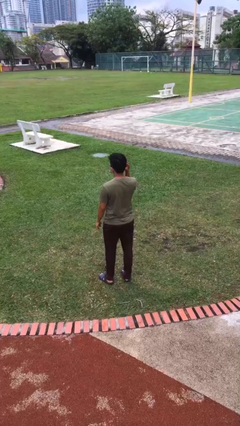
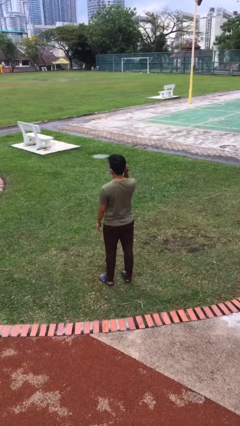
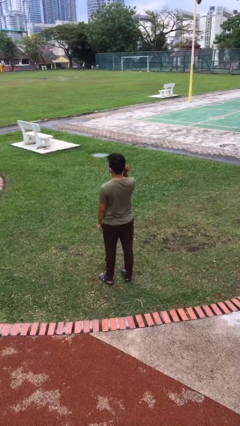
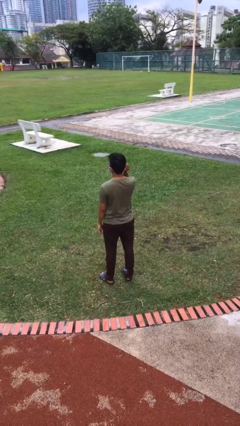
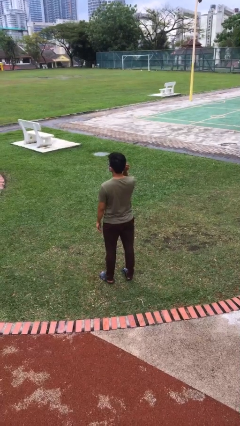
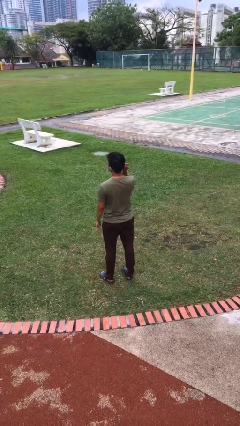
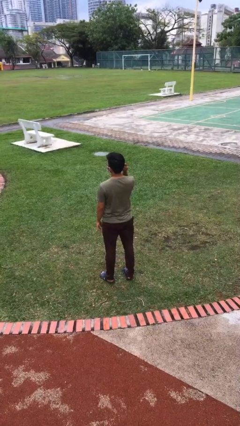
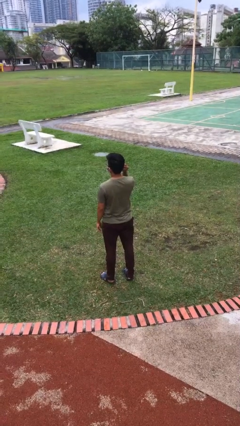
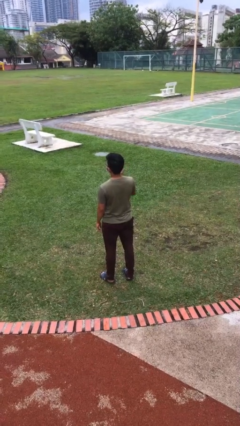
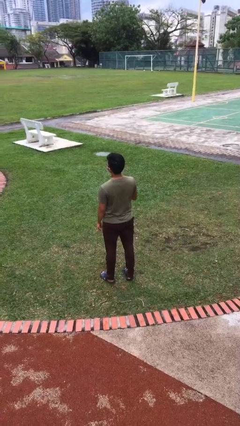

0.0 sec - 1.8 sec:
person touches earlobe

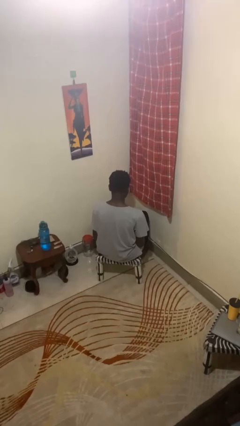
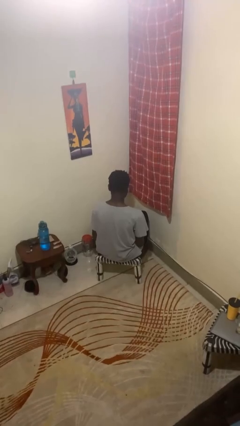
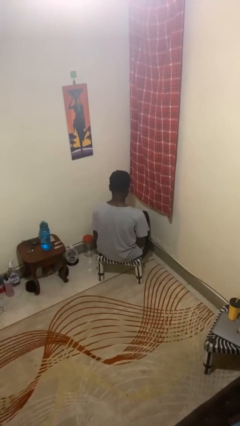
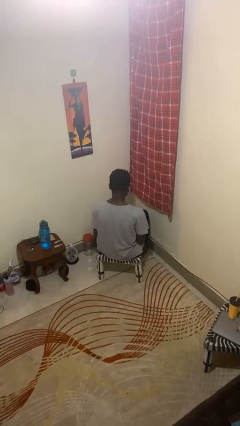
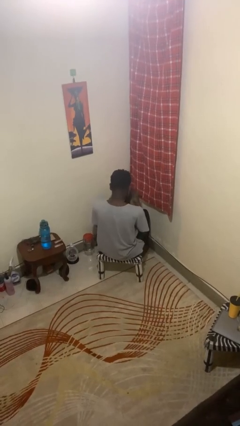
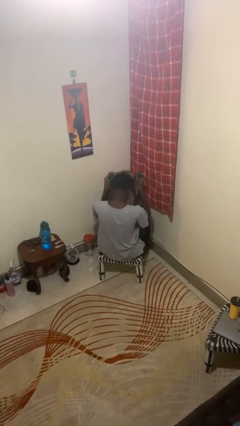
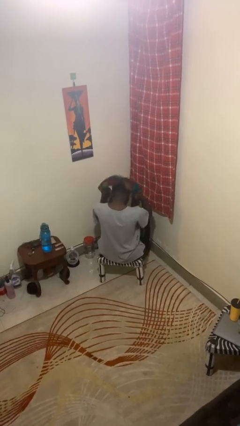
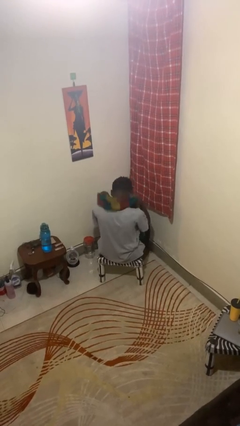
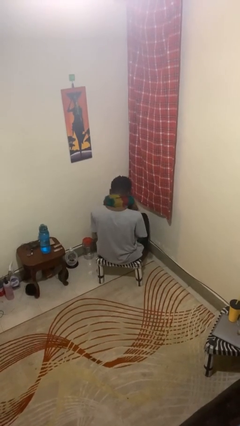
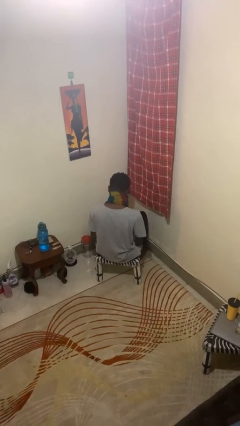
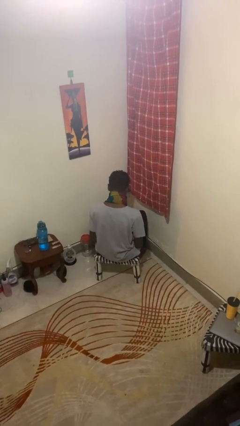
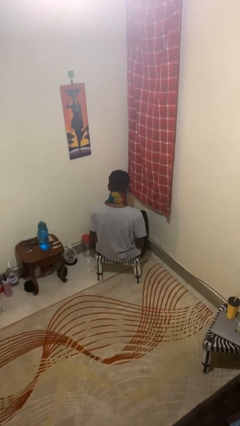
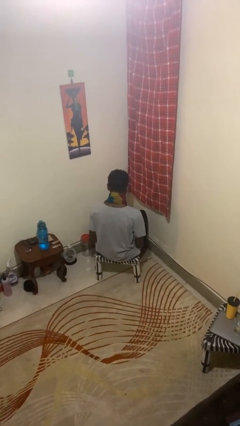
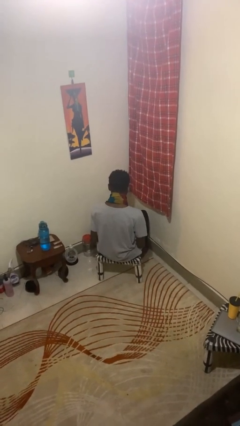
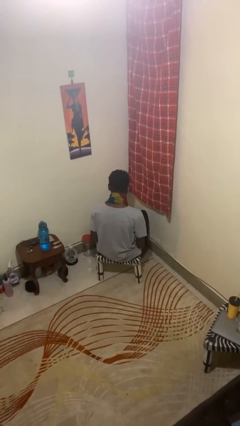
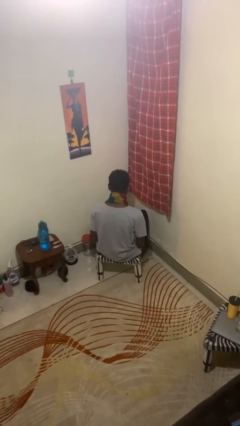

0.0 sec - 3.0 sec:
person puts on scarf

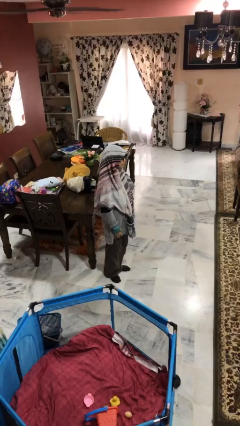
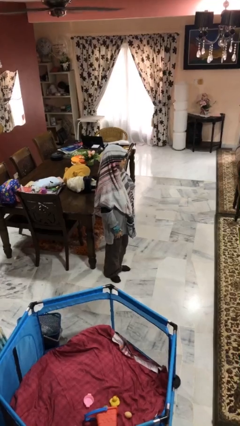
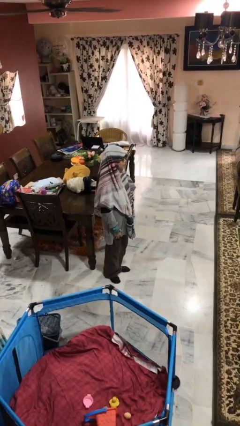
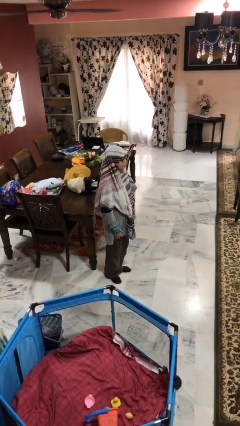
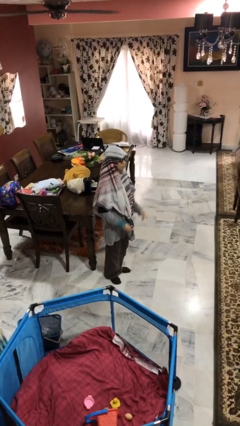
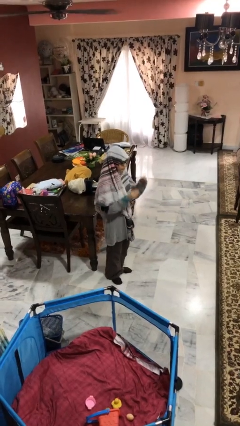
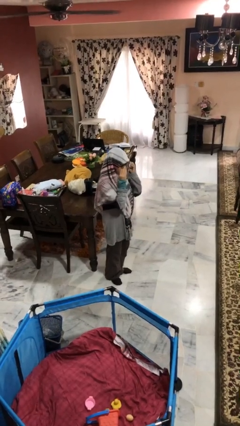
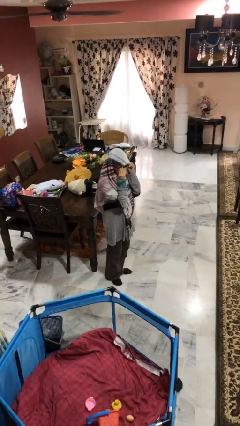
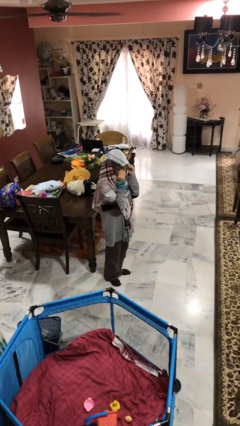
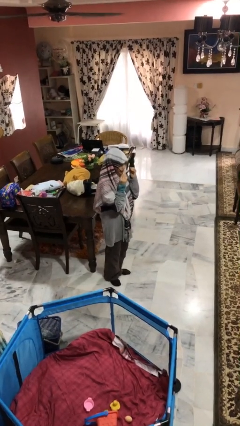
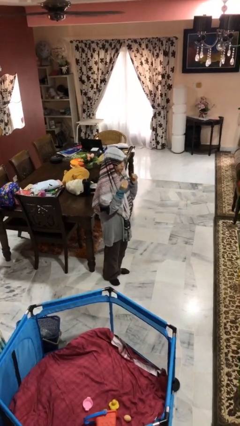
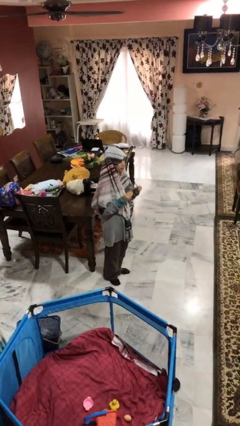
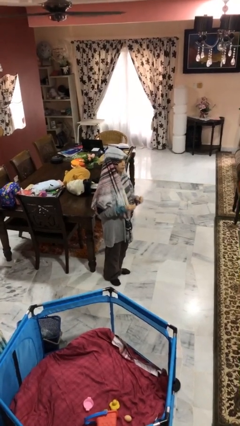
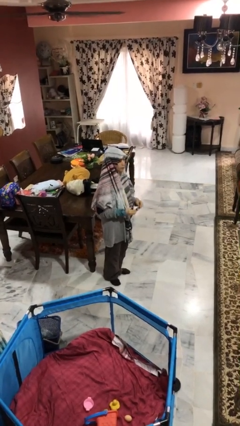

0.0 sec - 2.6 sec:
person takes off glasses

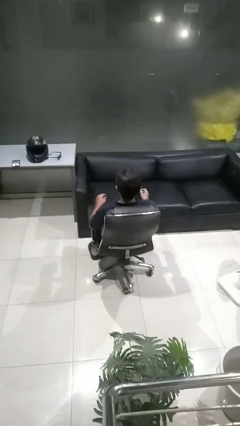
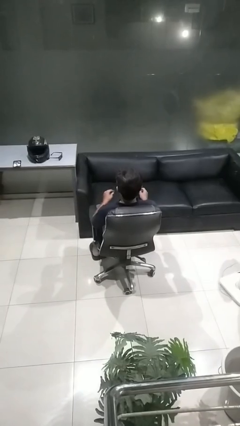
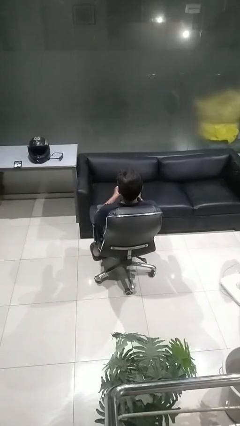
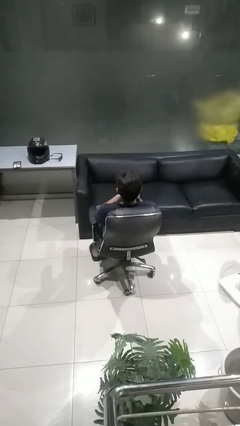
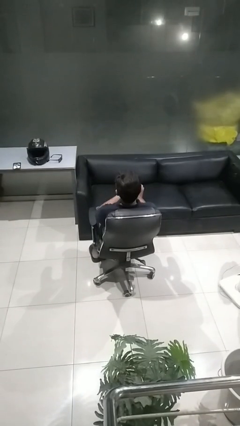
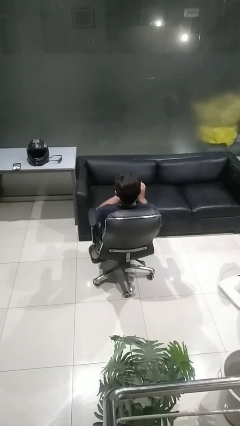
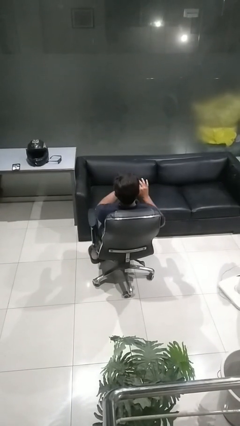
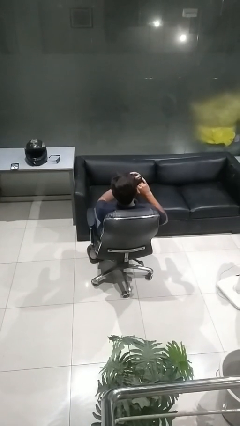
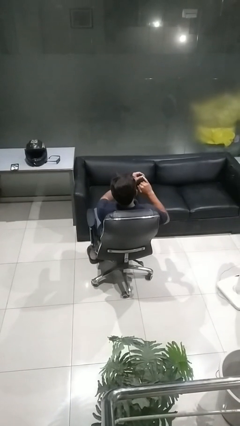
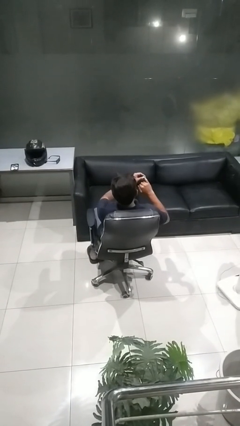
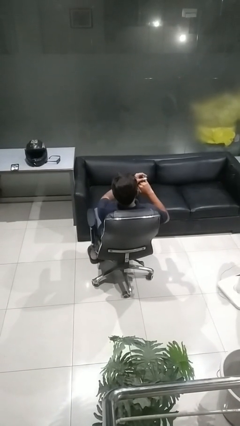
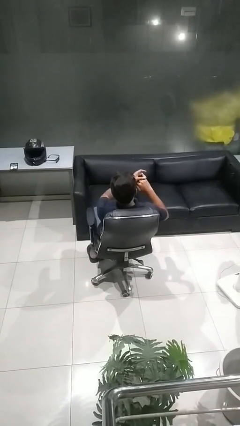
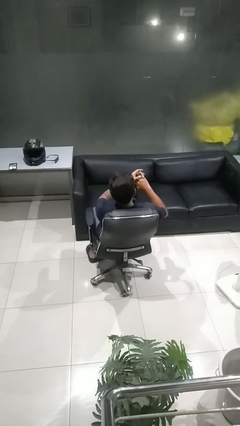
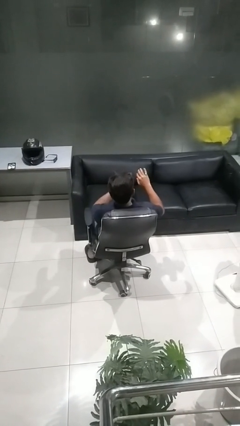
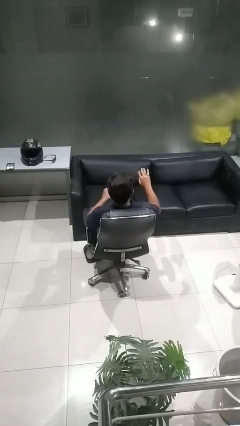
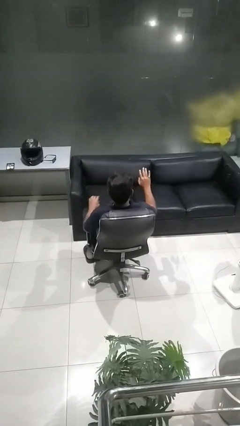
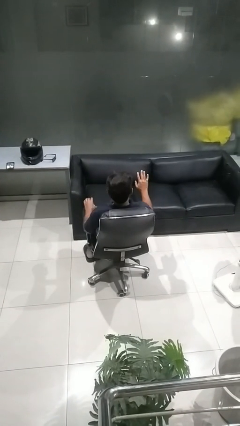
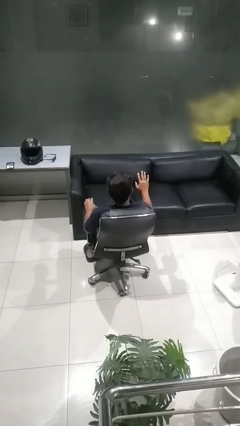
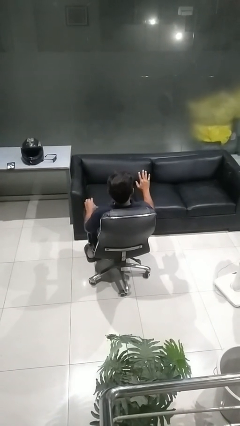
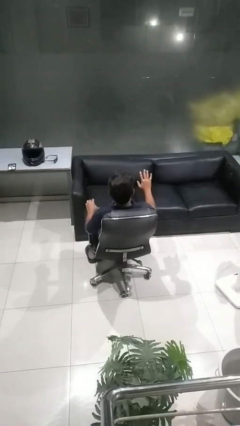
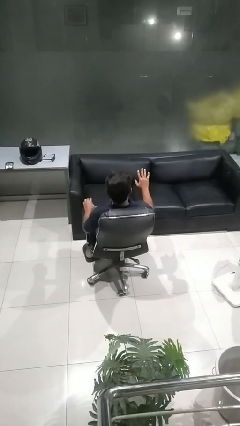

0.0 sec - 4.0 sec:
person puts on ring

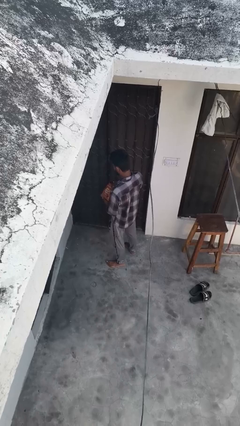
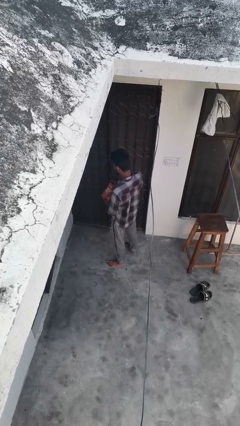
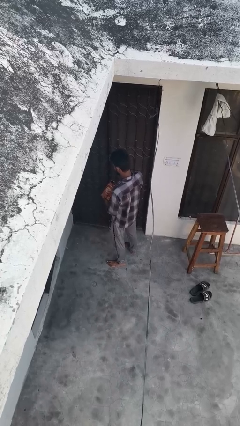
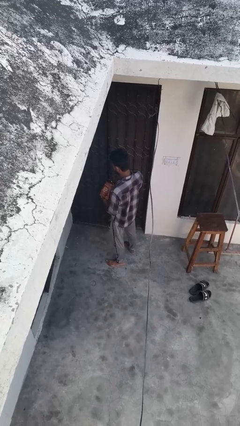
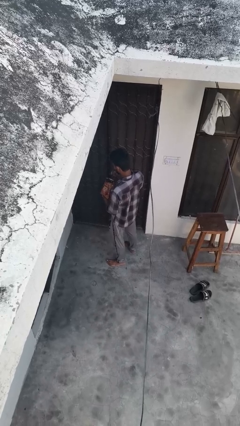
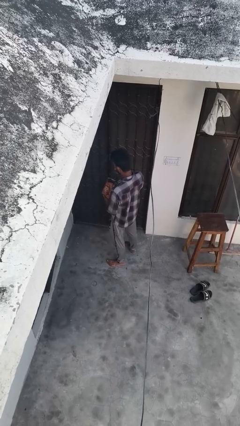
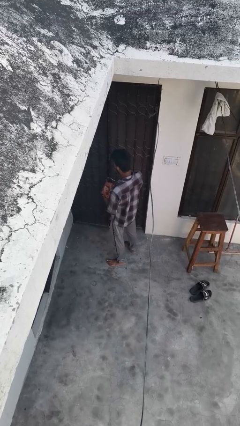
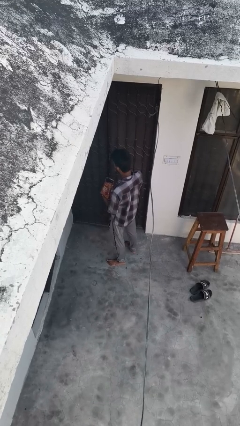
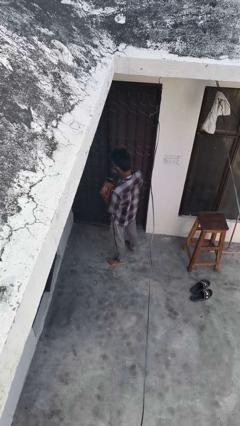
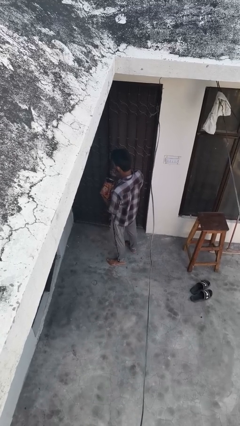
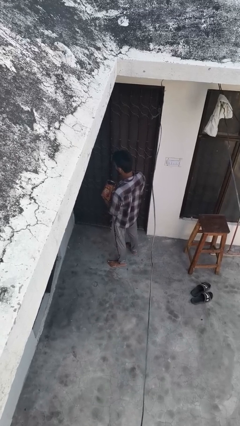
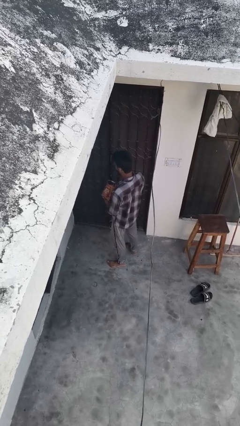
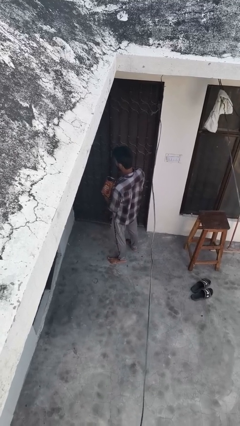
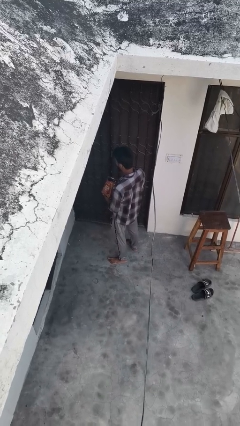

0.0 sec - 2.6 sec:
person eats snack from bag

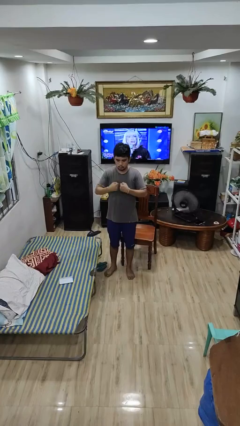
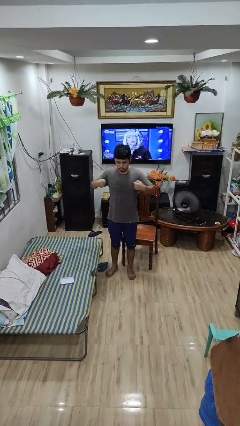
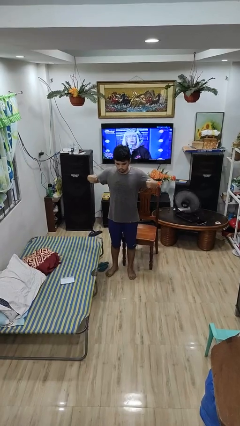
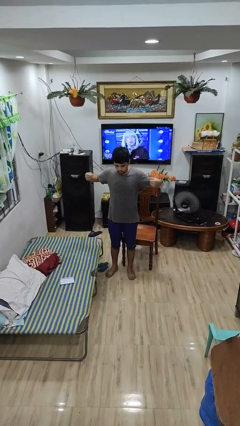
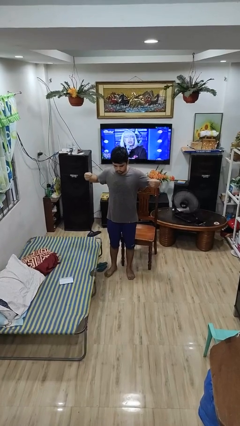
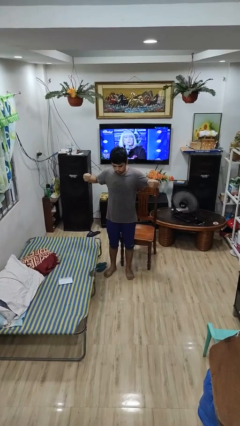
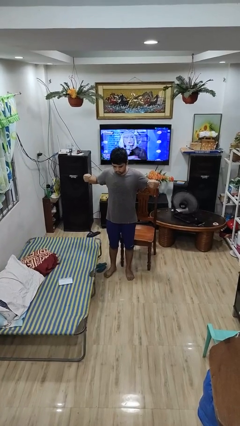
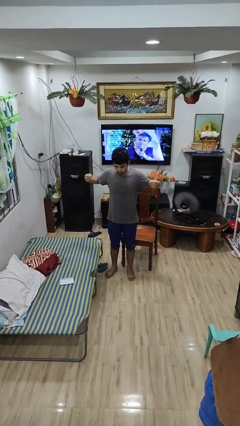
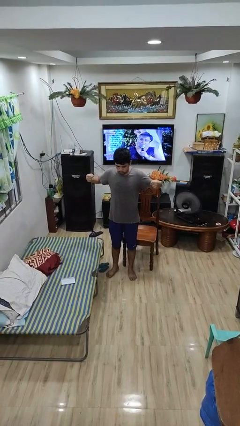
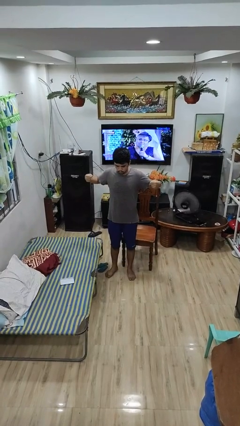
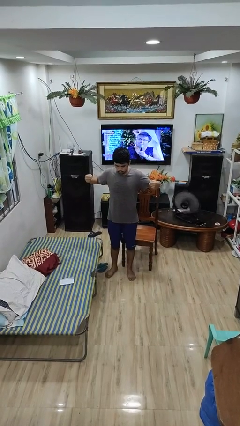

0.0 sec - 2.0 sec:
person gestures zoom in

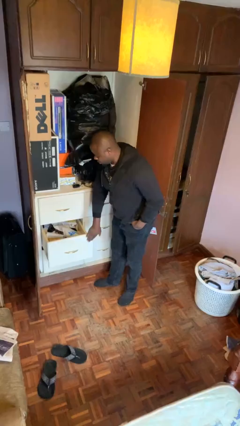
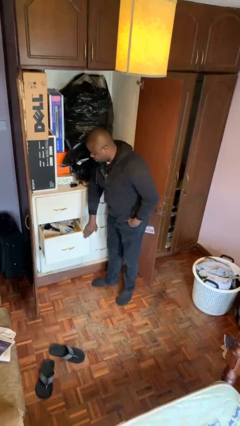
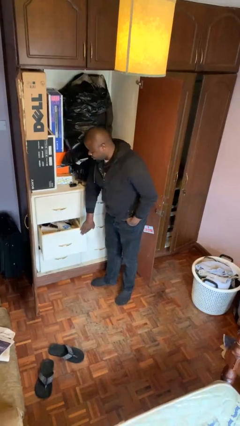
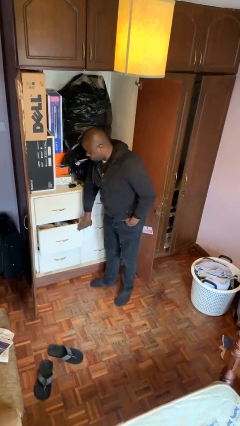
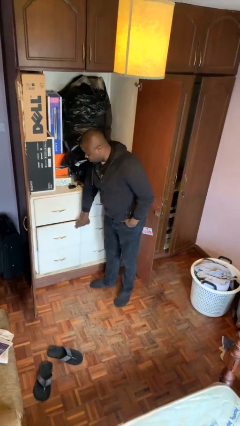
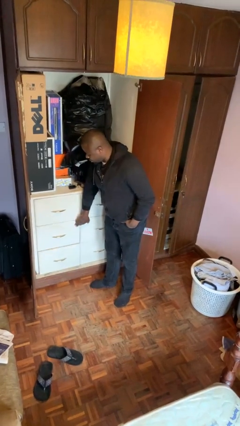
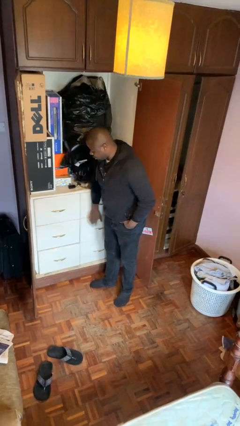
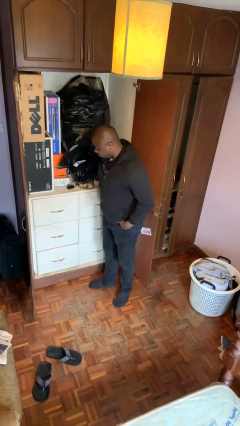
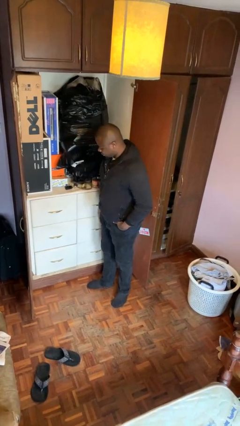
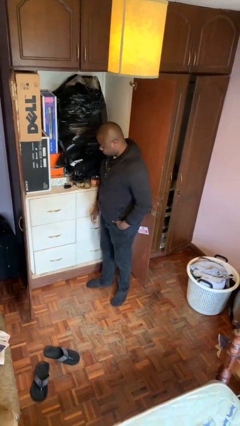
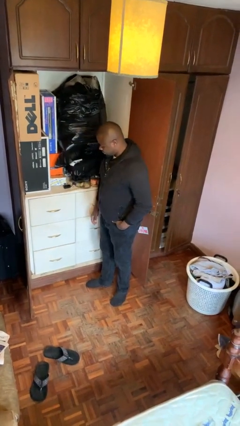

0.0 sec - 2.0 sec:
person closes dresser drawer
